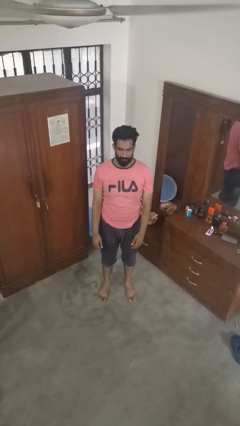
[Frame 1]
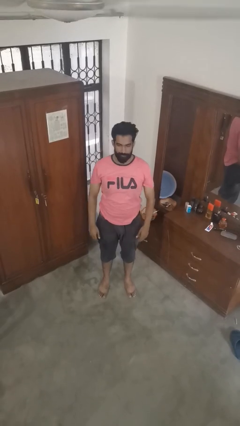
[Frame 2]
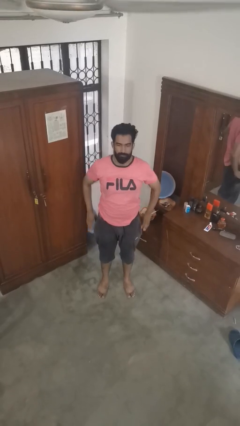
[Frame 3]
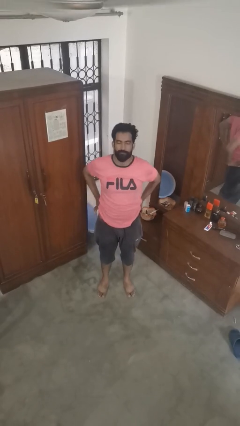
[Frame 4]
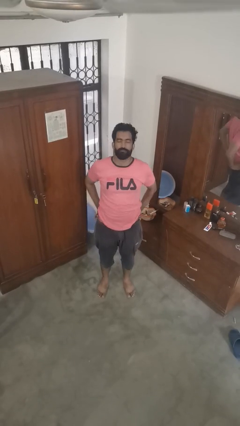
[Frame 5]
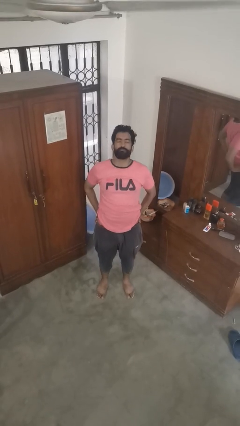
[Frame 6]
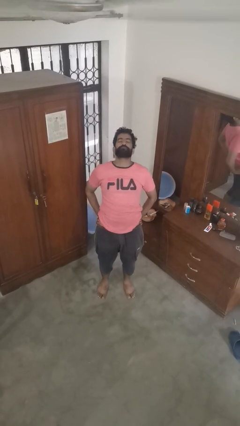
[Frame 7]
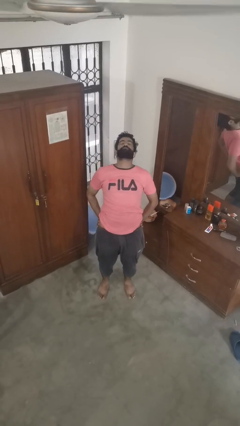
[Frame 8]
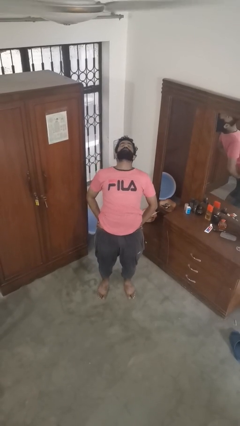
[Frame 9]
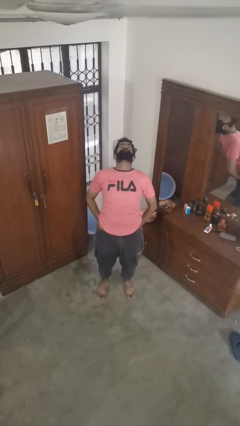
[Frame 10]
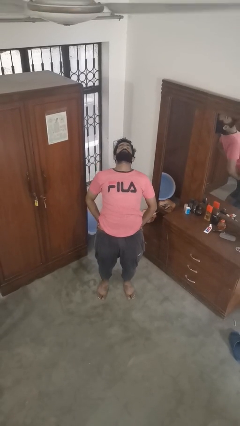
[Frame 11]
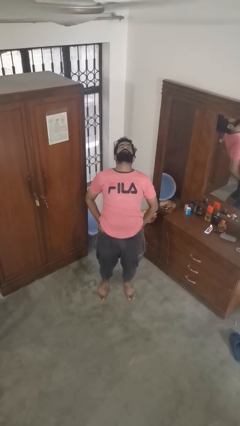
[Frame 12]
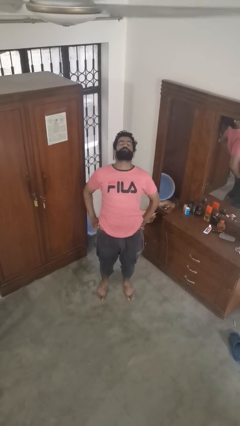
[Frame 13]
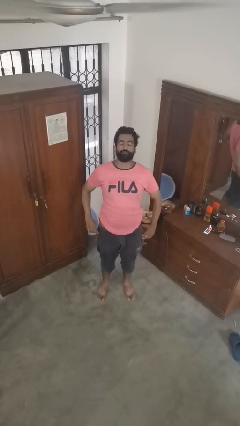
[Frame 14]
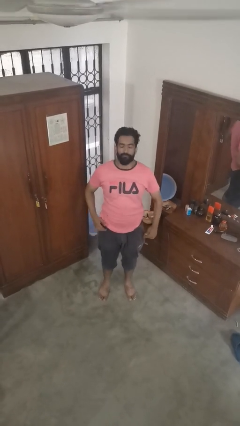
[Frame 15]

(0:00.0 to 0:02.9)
person stretches back

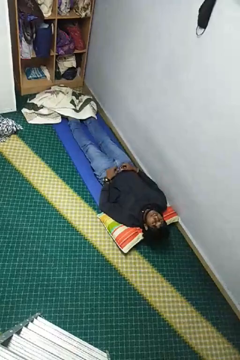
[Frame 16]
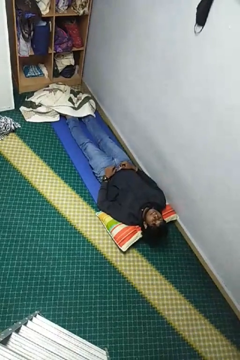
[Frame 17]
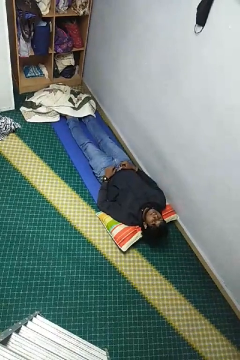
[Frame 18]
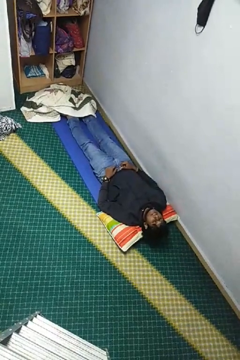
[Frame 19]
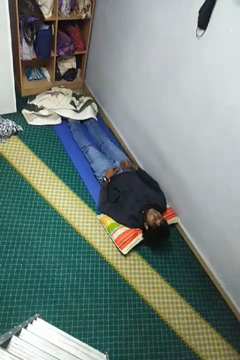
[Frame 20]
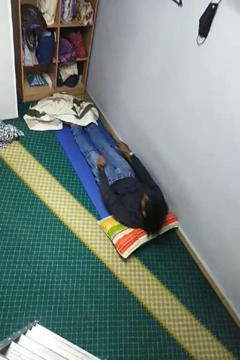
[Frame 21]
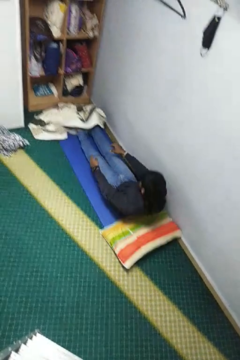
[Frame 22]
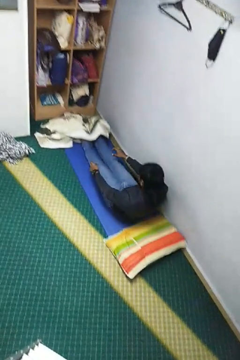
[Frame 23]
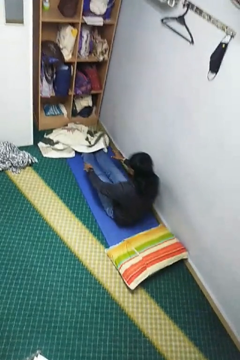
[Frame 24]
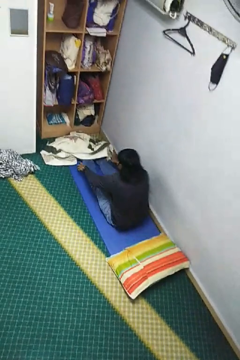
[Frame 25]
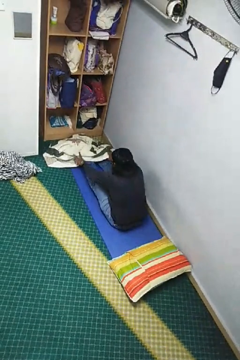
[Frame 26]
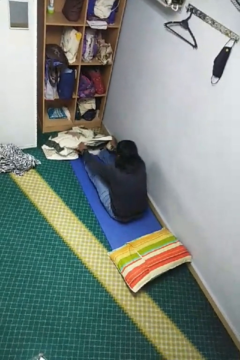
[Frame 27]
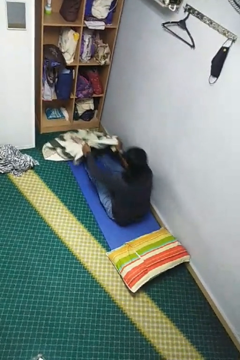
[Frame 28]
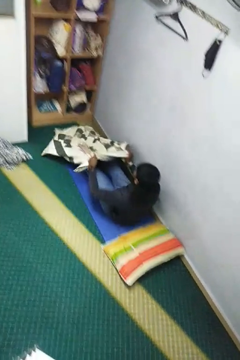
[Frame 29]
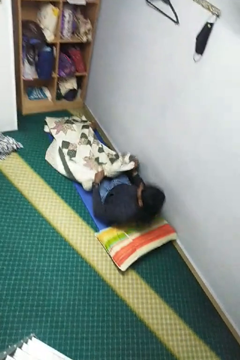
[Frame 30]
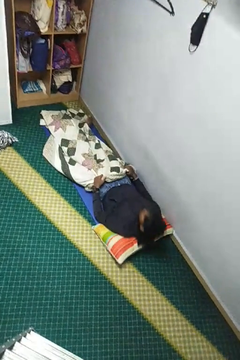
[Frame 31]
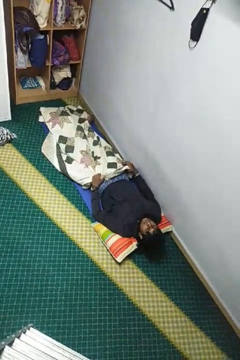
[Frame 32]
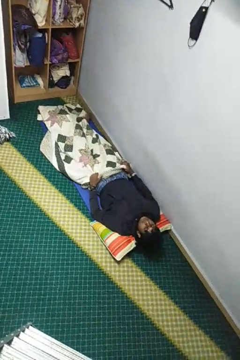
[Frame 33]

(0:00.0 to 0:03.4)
person covers with bedsheets

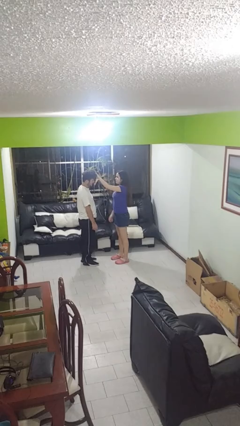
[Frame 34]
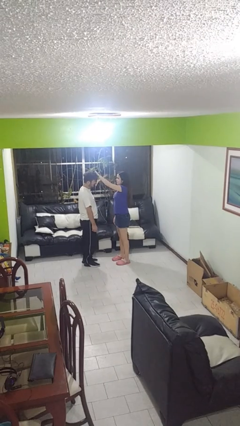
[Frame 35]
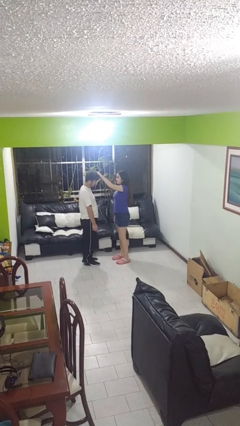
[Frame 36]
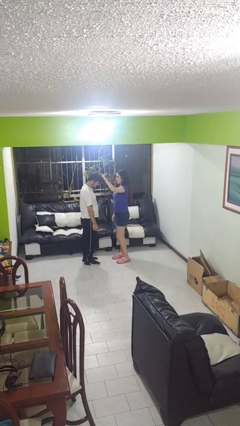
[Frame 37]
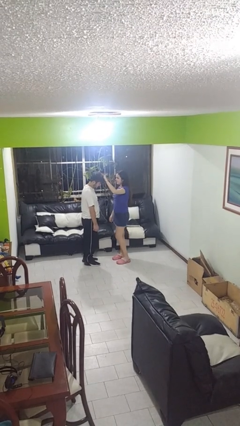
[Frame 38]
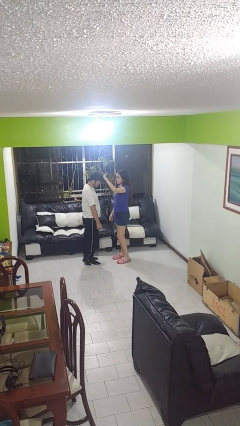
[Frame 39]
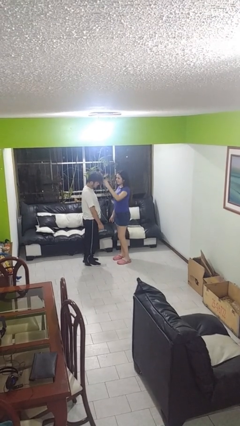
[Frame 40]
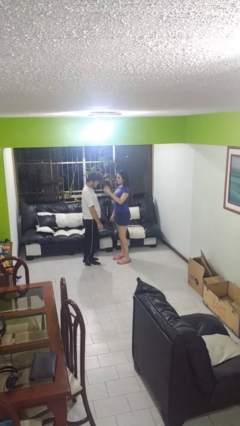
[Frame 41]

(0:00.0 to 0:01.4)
person grabs person by hair

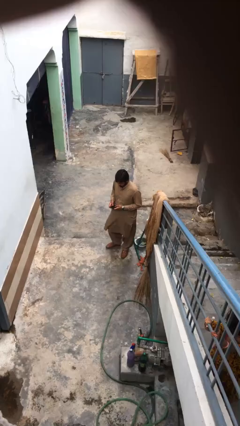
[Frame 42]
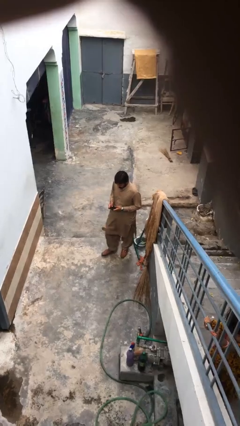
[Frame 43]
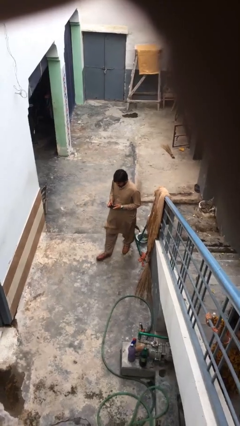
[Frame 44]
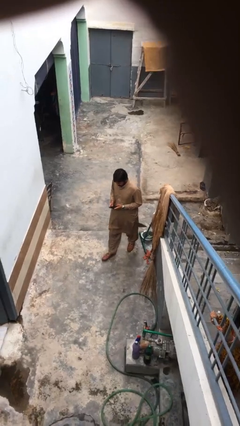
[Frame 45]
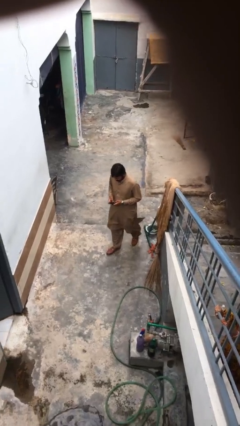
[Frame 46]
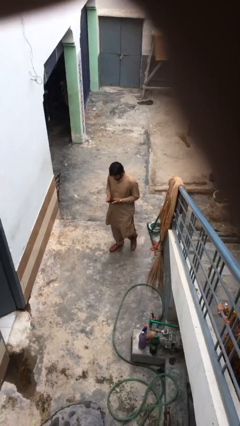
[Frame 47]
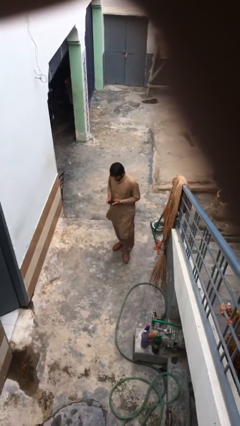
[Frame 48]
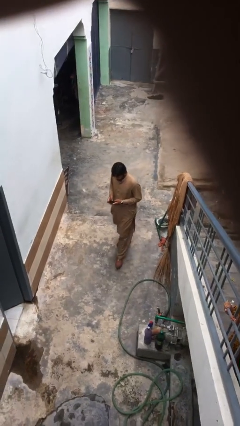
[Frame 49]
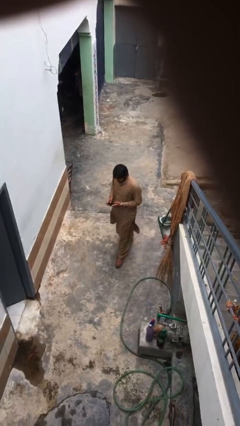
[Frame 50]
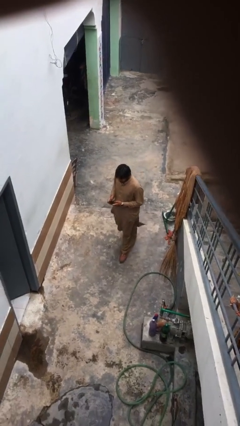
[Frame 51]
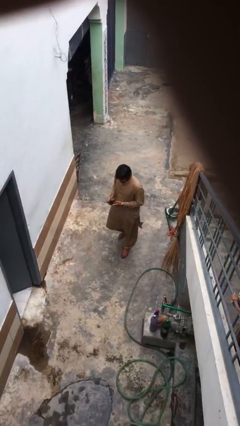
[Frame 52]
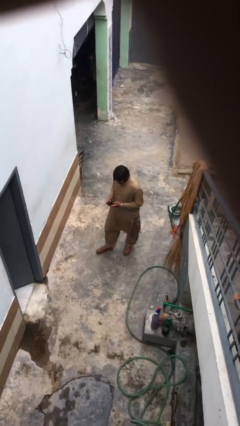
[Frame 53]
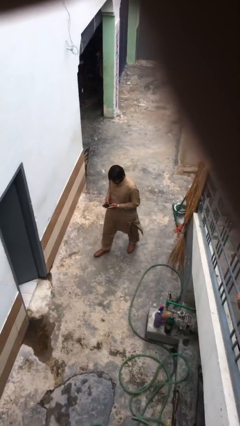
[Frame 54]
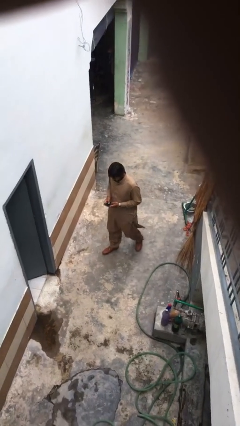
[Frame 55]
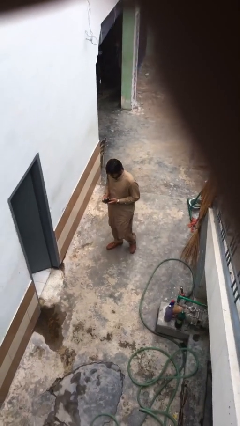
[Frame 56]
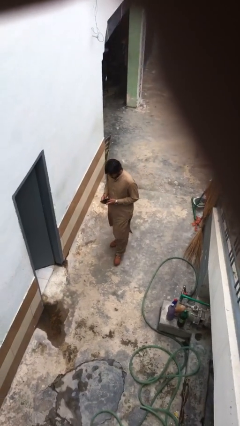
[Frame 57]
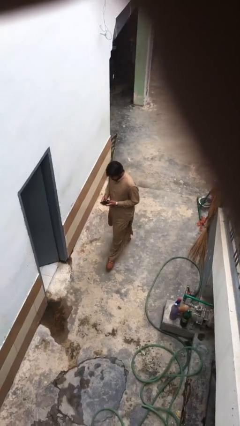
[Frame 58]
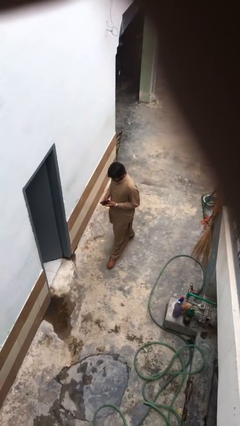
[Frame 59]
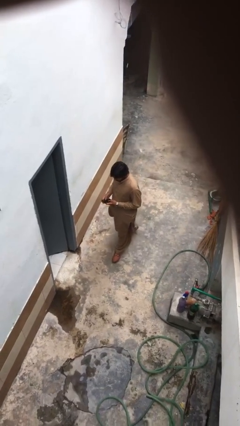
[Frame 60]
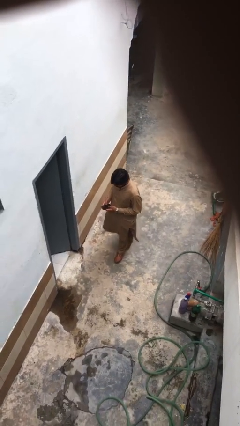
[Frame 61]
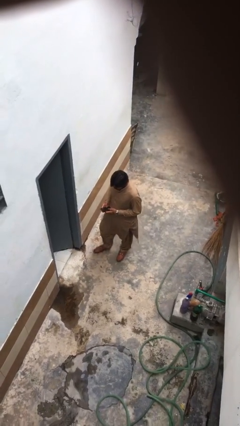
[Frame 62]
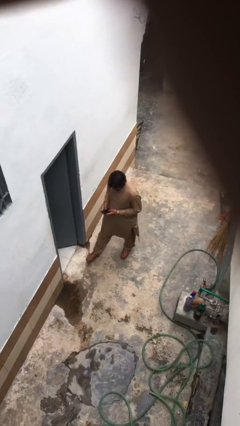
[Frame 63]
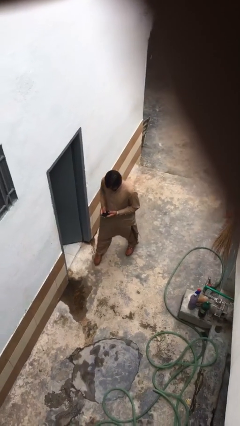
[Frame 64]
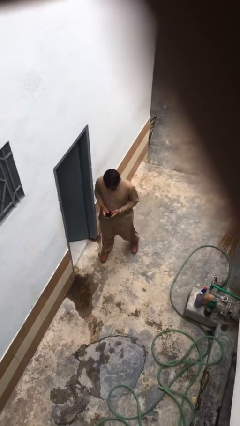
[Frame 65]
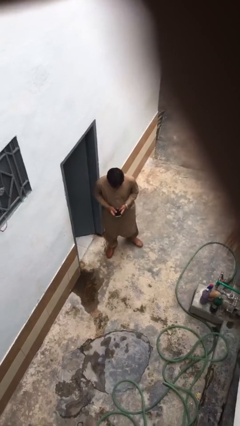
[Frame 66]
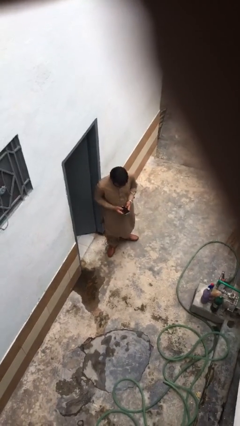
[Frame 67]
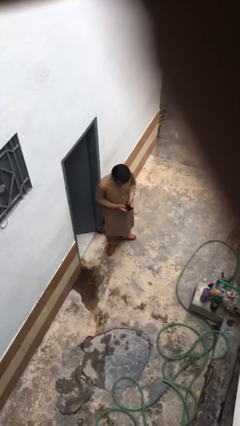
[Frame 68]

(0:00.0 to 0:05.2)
person texts on phone

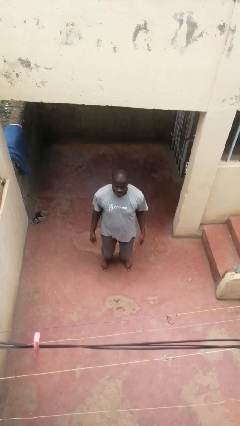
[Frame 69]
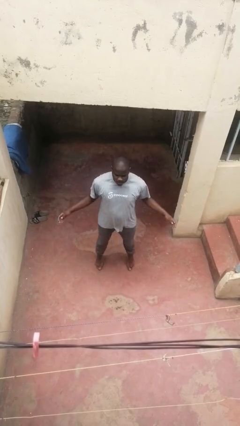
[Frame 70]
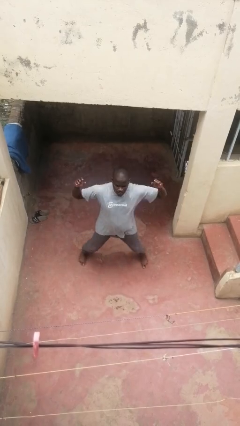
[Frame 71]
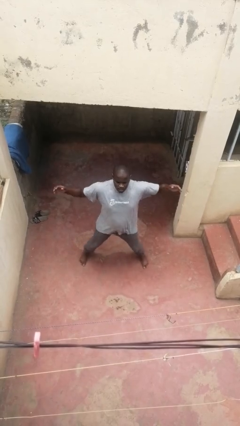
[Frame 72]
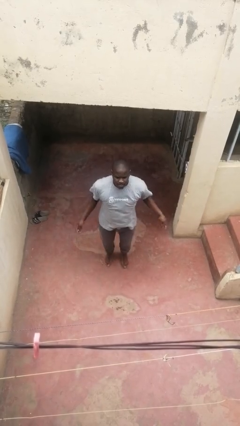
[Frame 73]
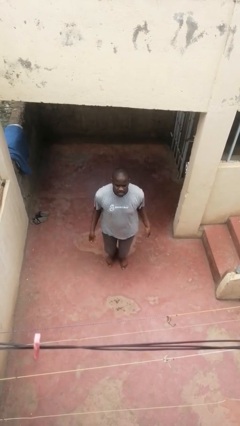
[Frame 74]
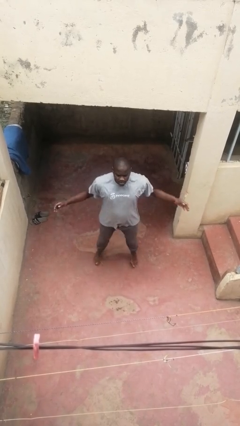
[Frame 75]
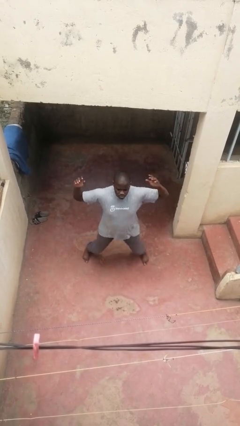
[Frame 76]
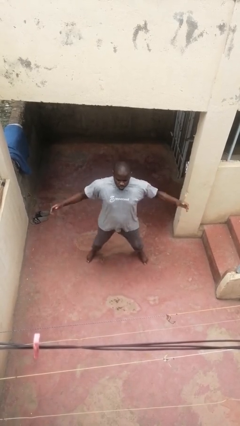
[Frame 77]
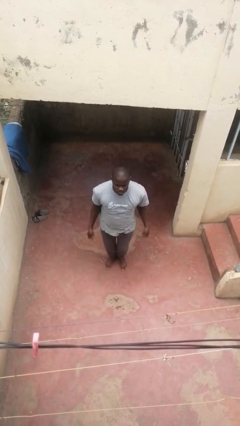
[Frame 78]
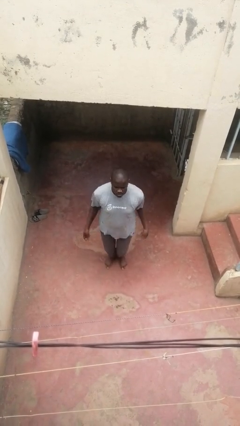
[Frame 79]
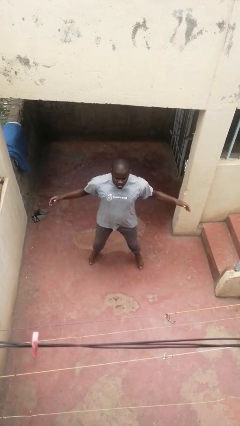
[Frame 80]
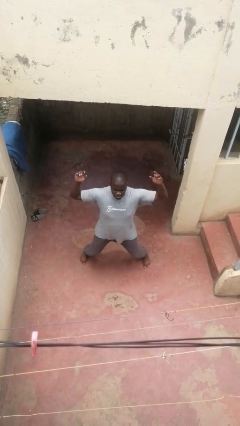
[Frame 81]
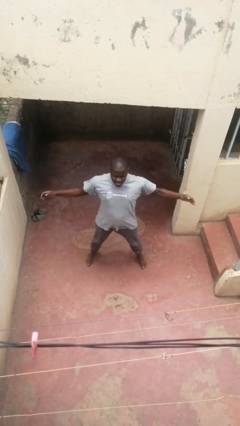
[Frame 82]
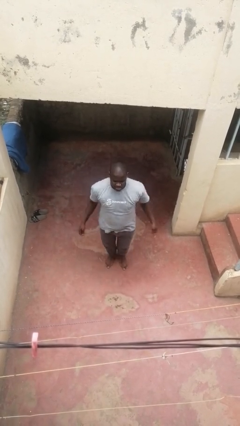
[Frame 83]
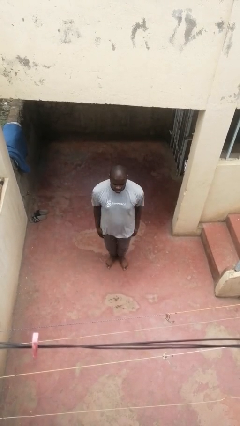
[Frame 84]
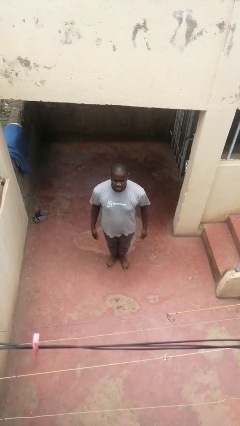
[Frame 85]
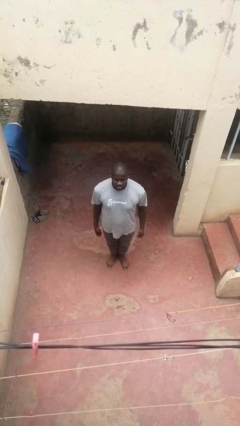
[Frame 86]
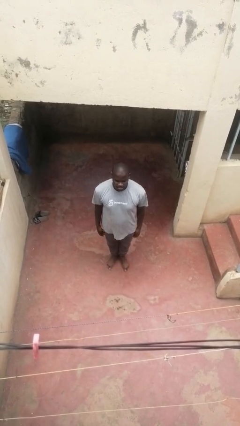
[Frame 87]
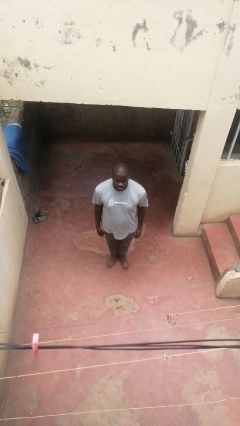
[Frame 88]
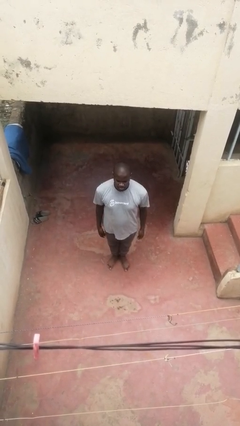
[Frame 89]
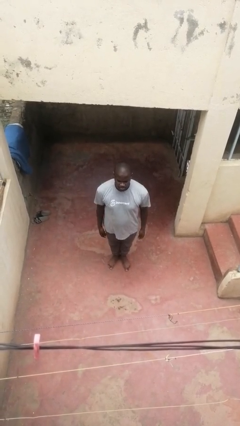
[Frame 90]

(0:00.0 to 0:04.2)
person exercises with jumping jacks

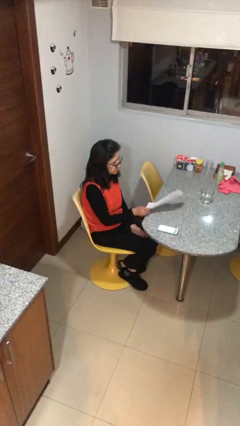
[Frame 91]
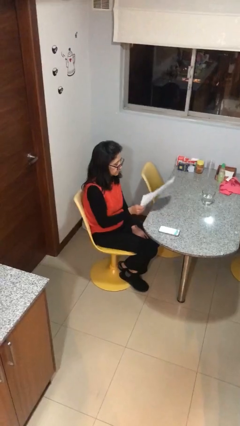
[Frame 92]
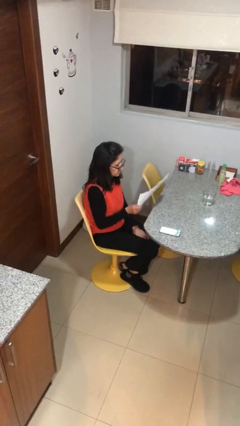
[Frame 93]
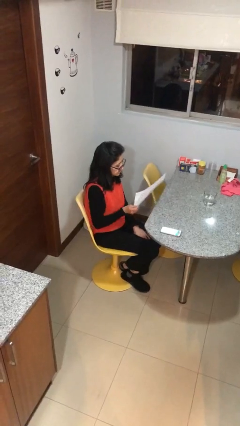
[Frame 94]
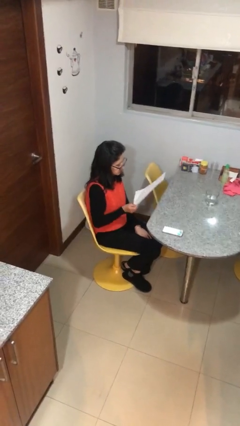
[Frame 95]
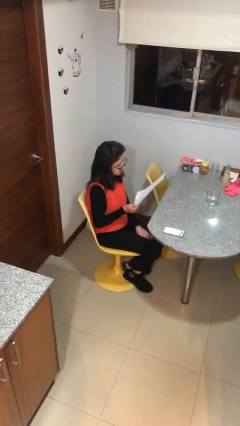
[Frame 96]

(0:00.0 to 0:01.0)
person picks up object from table
